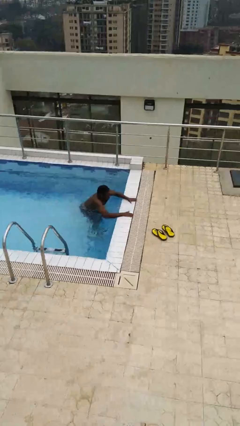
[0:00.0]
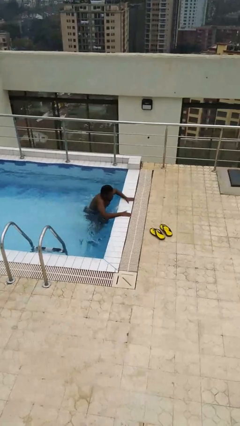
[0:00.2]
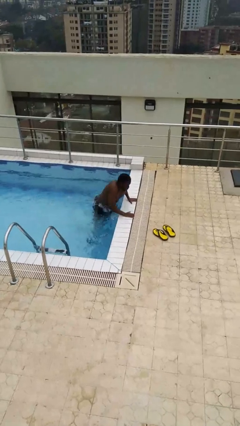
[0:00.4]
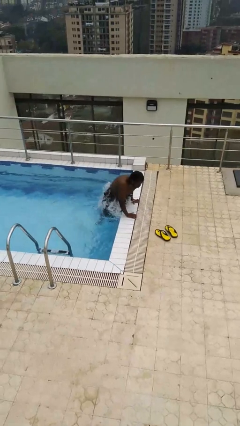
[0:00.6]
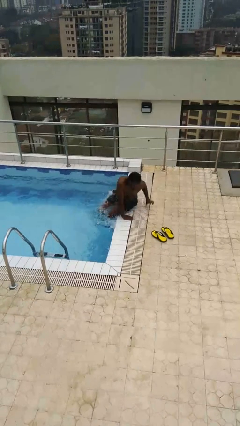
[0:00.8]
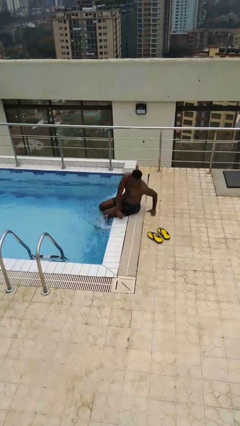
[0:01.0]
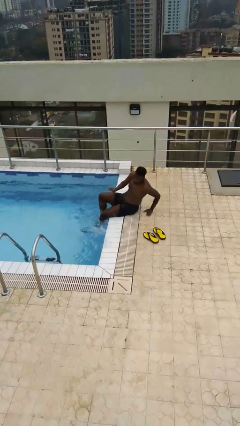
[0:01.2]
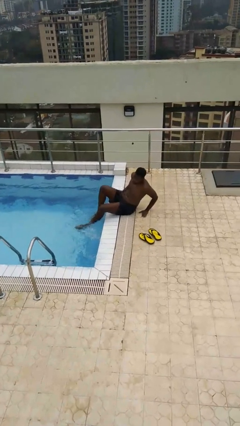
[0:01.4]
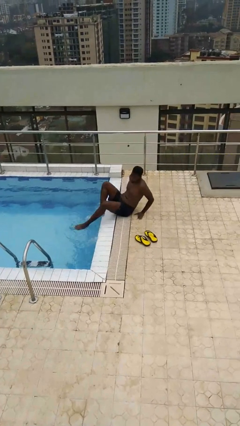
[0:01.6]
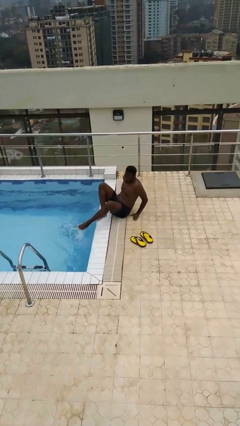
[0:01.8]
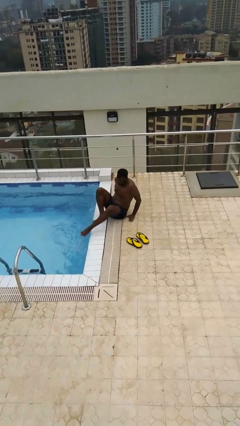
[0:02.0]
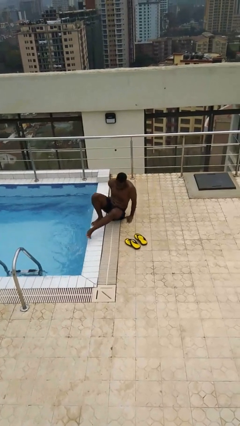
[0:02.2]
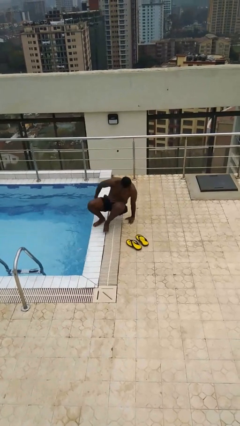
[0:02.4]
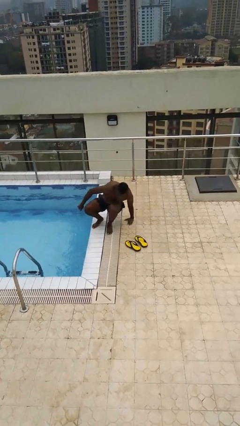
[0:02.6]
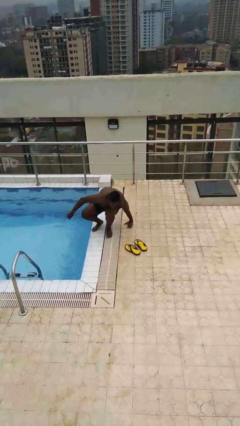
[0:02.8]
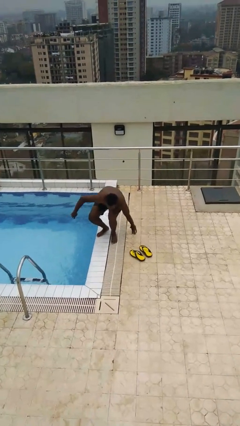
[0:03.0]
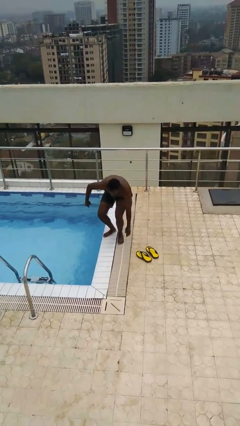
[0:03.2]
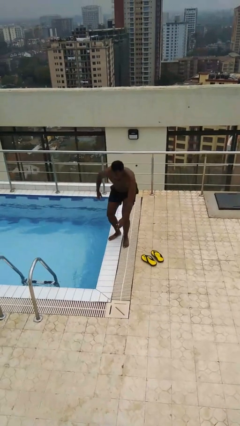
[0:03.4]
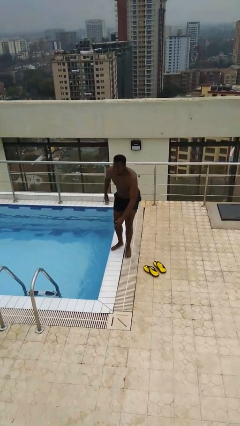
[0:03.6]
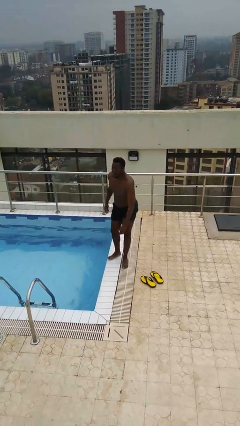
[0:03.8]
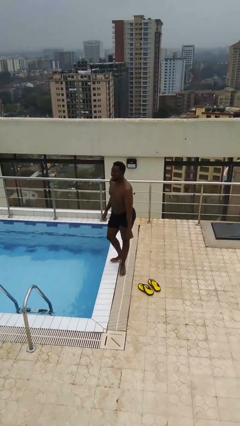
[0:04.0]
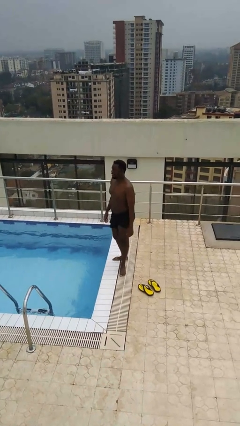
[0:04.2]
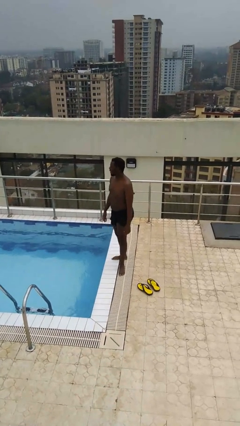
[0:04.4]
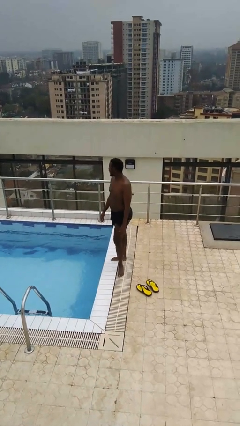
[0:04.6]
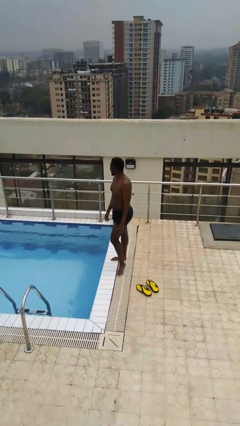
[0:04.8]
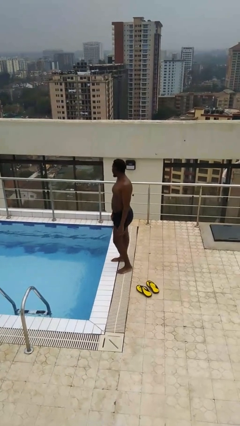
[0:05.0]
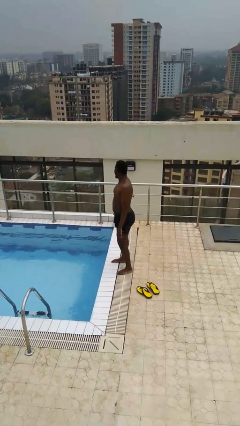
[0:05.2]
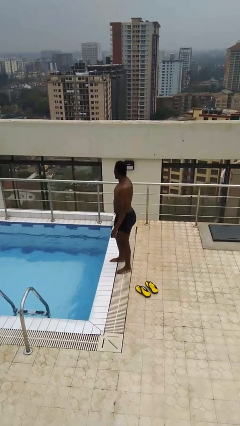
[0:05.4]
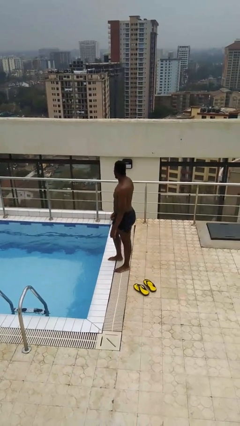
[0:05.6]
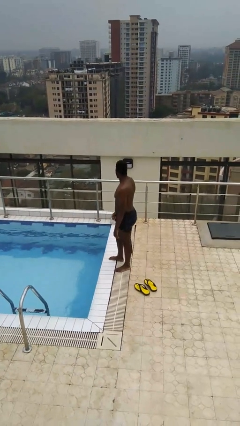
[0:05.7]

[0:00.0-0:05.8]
person exits pool

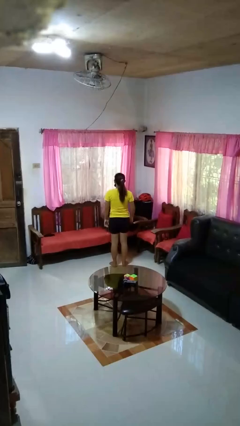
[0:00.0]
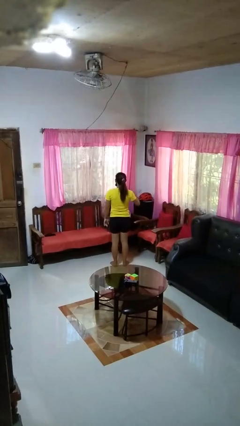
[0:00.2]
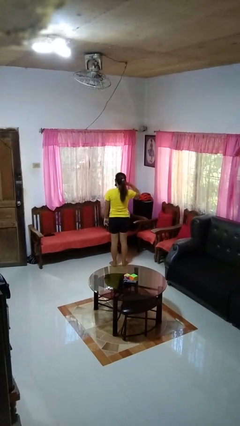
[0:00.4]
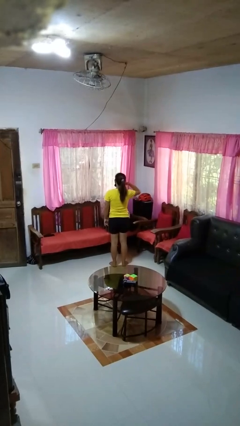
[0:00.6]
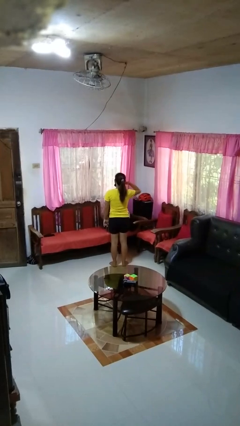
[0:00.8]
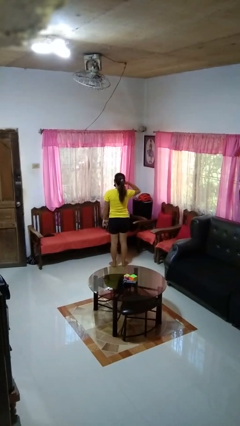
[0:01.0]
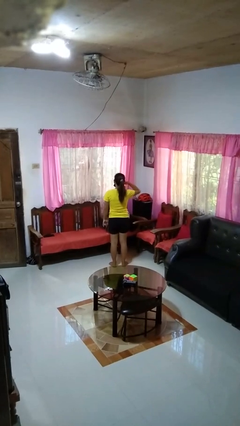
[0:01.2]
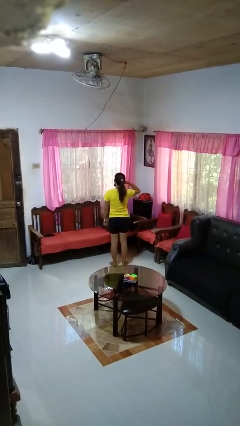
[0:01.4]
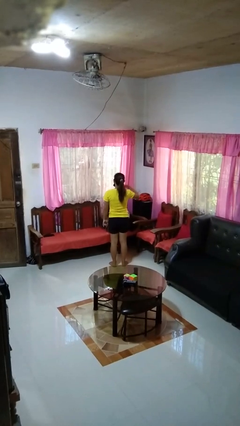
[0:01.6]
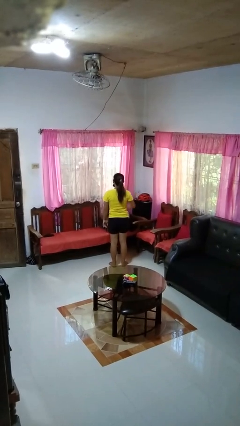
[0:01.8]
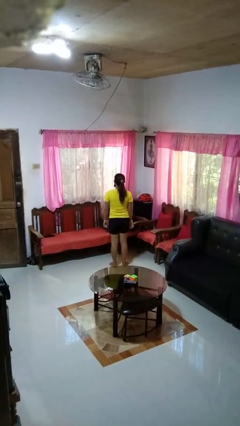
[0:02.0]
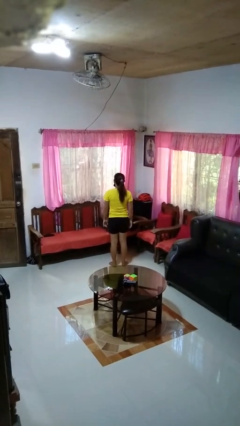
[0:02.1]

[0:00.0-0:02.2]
person gestures call me

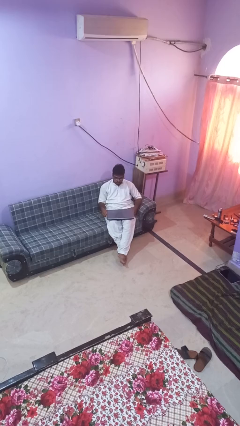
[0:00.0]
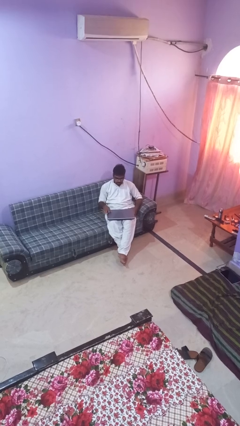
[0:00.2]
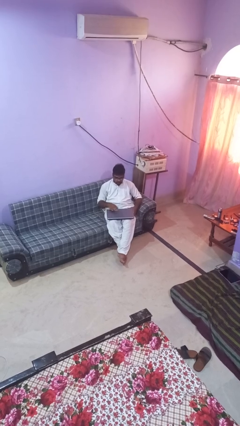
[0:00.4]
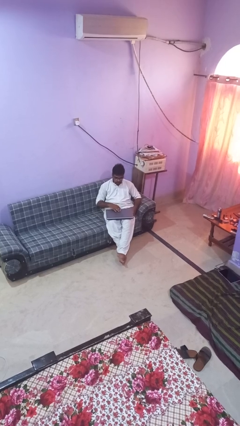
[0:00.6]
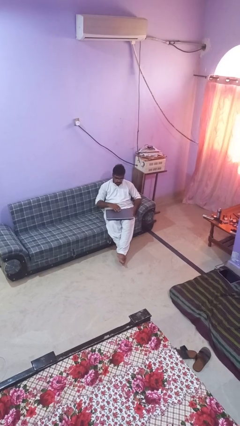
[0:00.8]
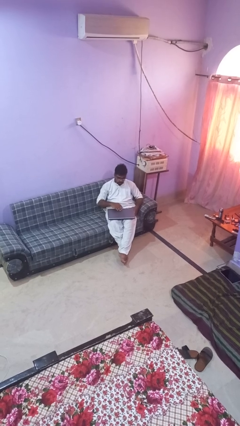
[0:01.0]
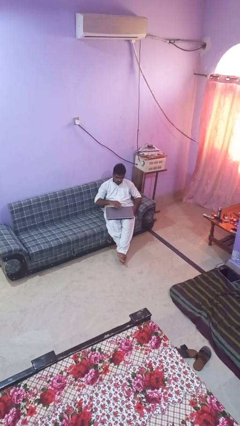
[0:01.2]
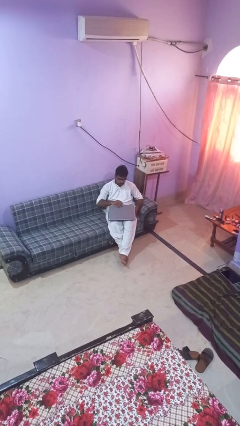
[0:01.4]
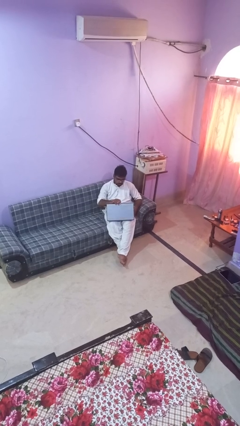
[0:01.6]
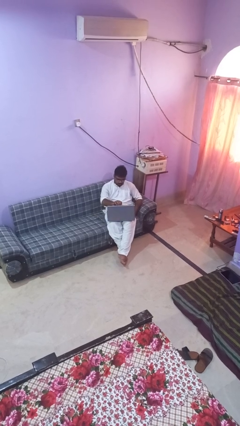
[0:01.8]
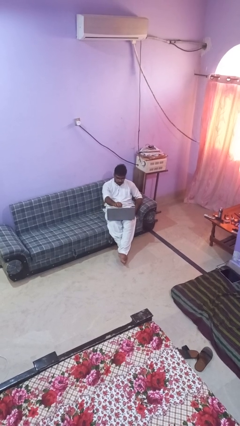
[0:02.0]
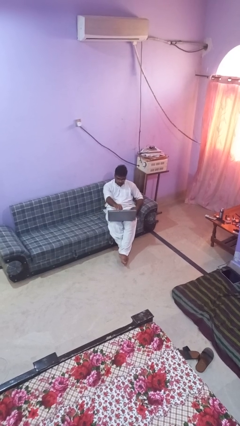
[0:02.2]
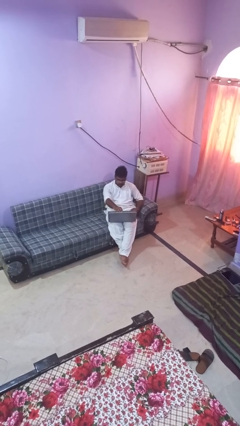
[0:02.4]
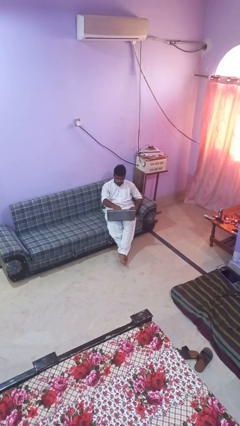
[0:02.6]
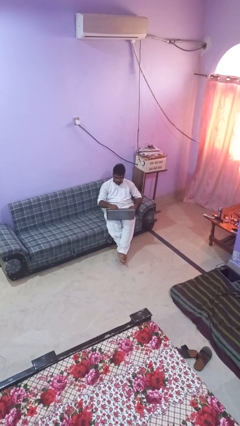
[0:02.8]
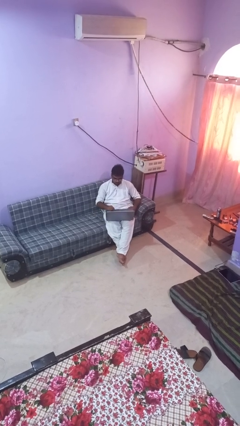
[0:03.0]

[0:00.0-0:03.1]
person opens laptop

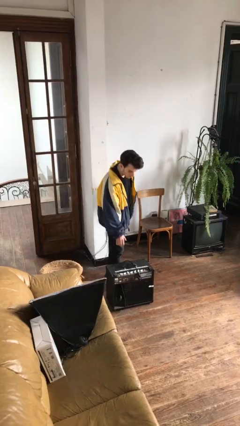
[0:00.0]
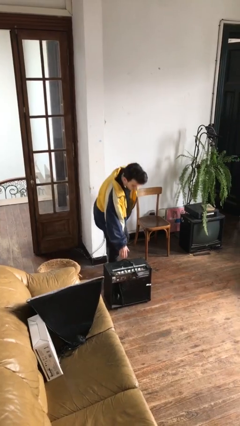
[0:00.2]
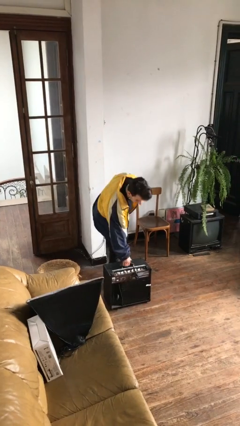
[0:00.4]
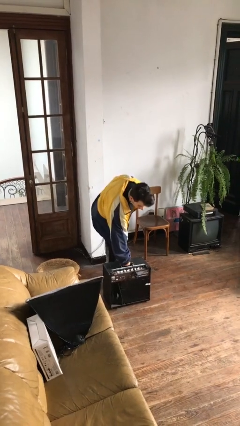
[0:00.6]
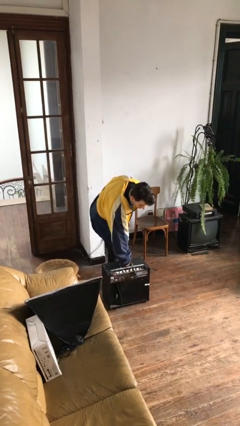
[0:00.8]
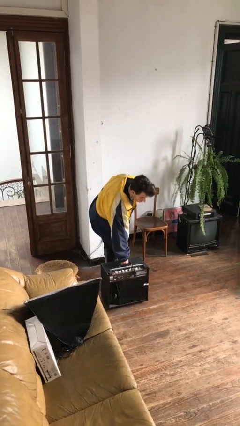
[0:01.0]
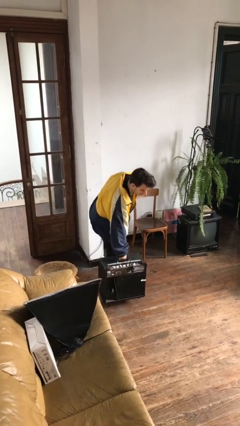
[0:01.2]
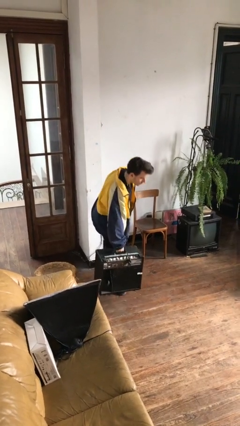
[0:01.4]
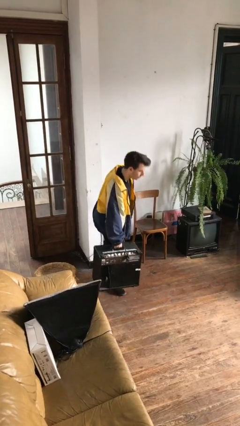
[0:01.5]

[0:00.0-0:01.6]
person picks up object from floor

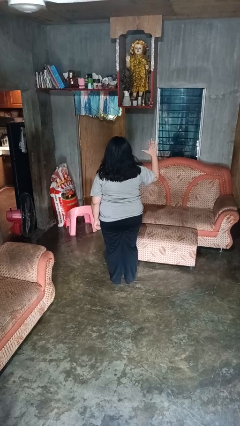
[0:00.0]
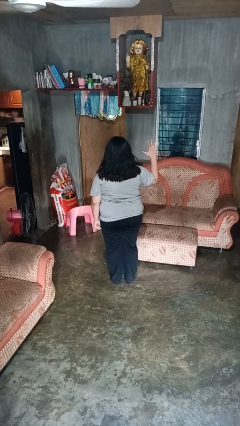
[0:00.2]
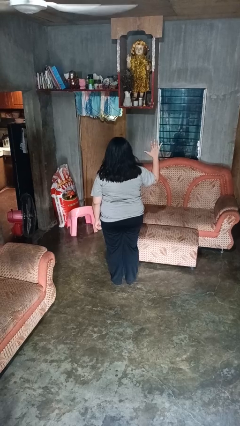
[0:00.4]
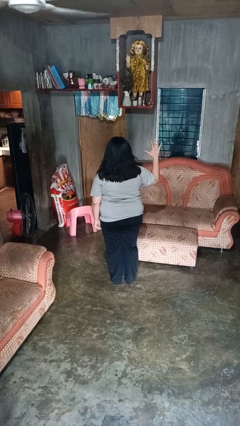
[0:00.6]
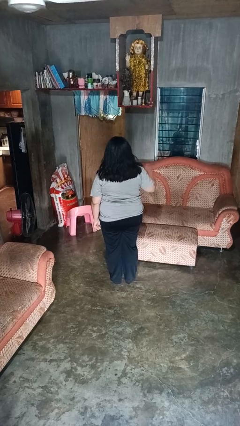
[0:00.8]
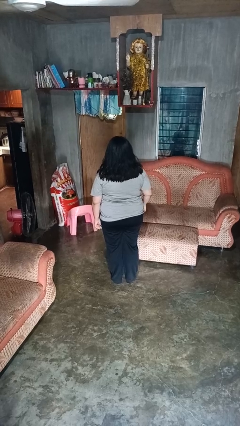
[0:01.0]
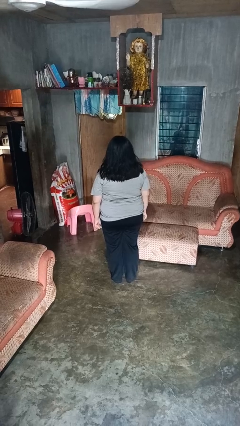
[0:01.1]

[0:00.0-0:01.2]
person gestures number five

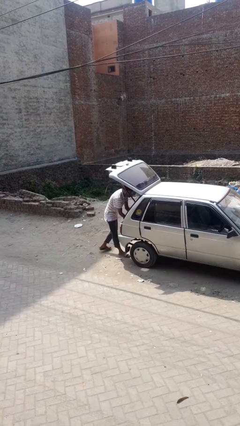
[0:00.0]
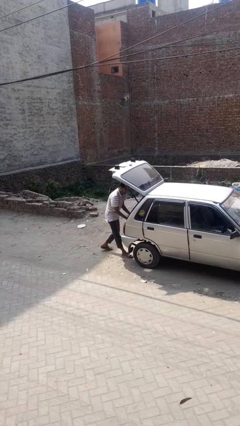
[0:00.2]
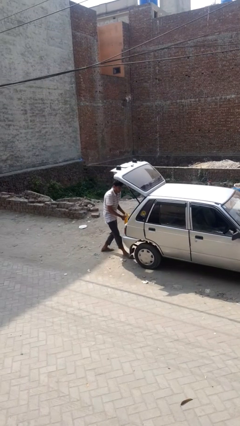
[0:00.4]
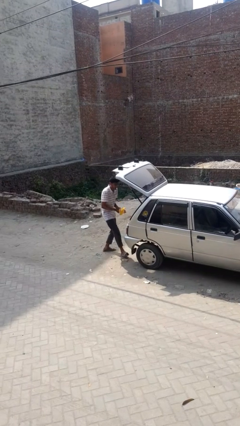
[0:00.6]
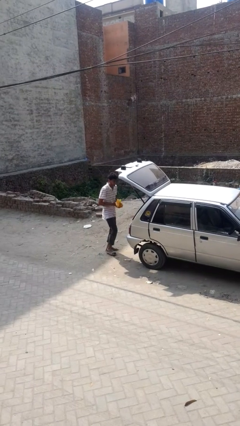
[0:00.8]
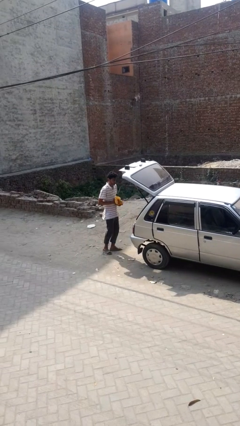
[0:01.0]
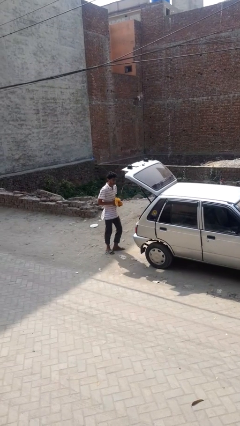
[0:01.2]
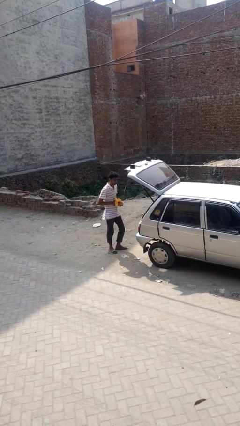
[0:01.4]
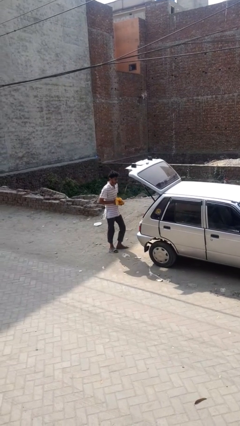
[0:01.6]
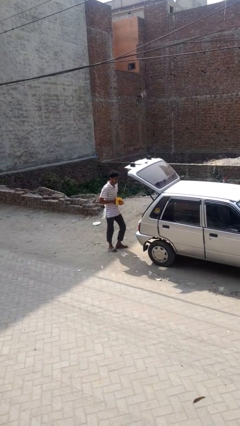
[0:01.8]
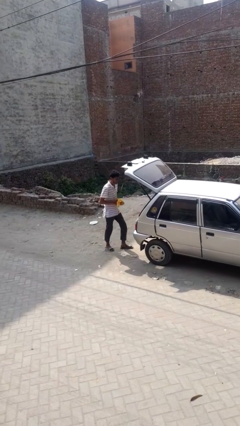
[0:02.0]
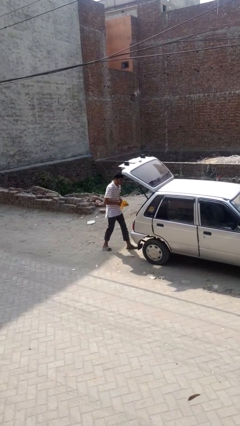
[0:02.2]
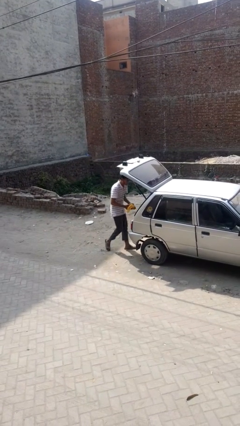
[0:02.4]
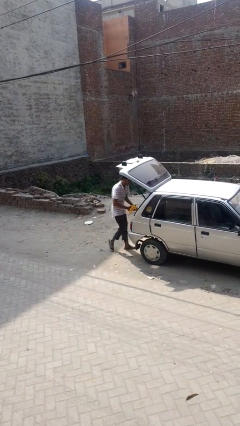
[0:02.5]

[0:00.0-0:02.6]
person unloads car

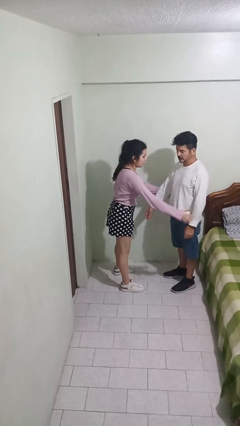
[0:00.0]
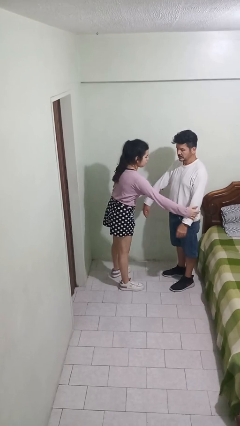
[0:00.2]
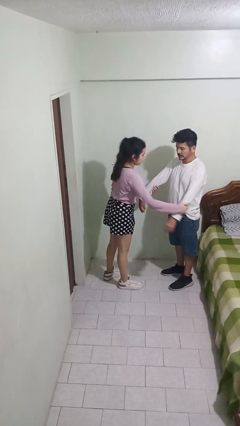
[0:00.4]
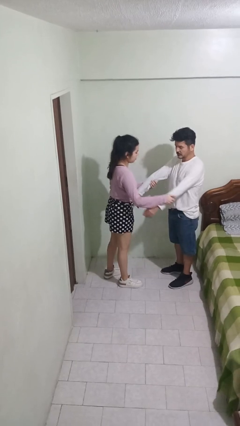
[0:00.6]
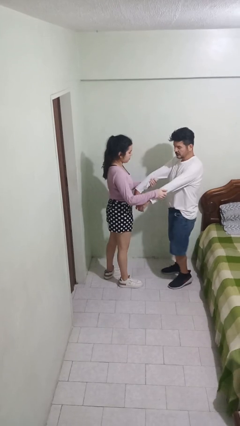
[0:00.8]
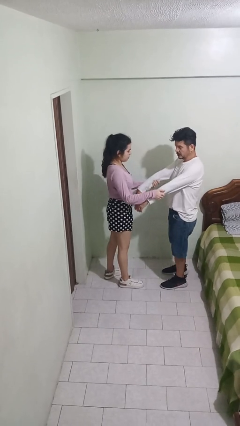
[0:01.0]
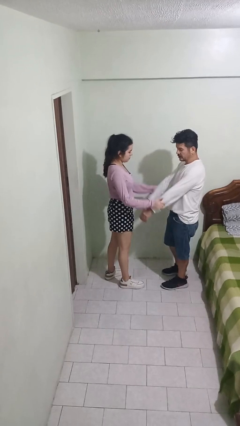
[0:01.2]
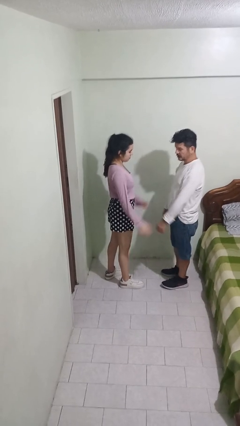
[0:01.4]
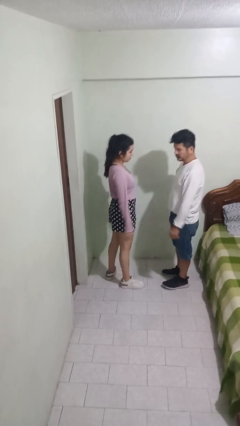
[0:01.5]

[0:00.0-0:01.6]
person grabs person by forearm
